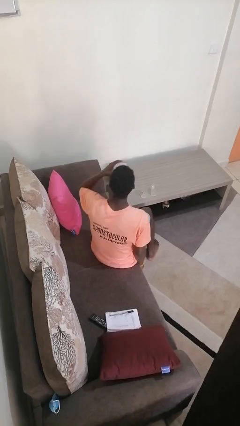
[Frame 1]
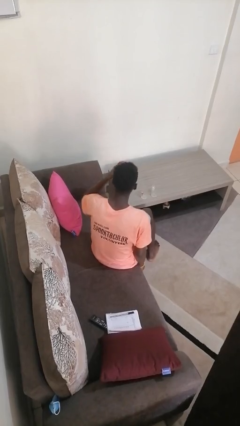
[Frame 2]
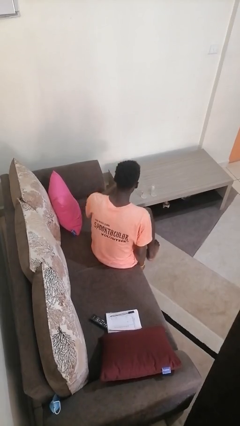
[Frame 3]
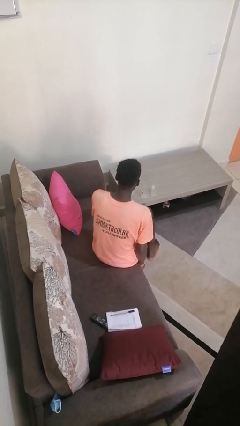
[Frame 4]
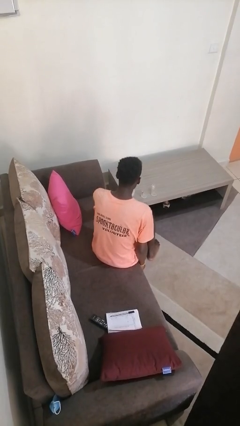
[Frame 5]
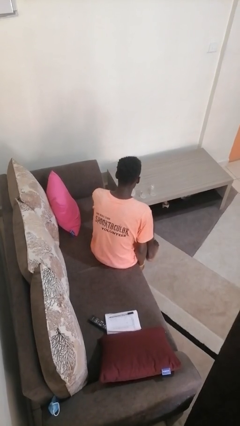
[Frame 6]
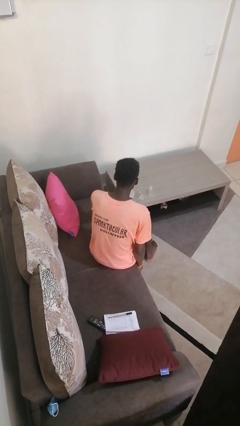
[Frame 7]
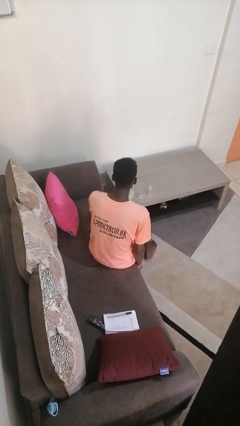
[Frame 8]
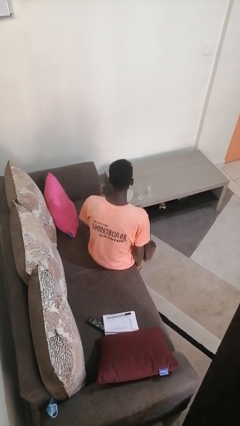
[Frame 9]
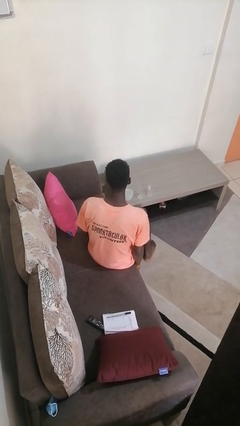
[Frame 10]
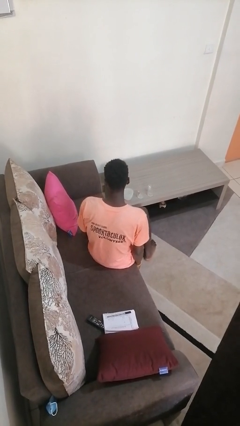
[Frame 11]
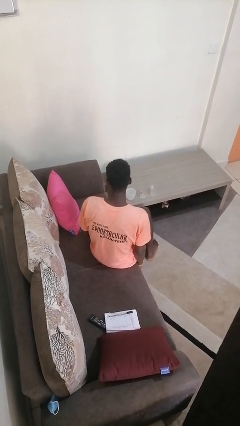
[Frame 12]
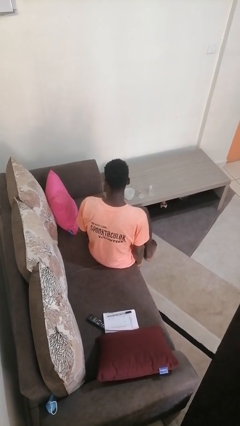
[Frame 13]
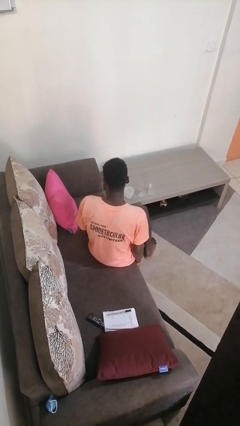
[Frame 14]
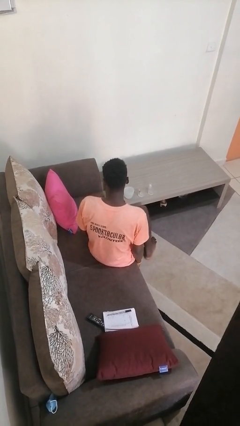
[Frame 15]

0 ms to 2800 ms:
person puts down object on table

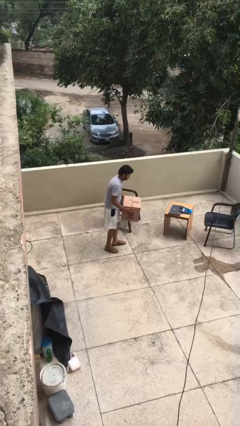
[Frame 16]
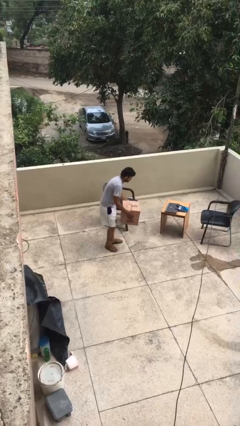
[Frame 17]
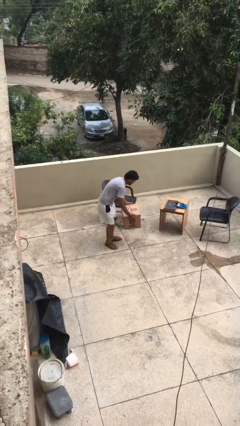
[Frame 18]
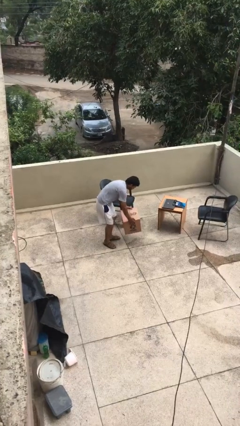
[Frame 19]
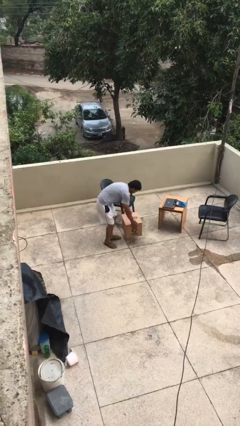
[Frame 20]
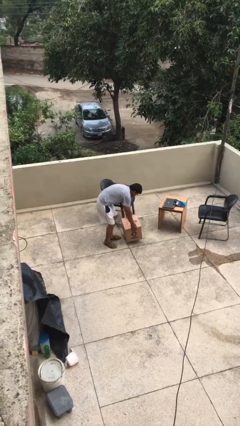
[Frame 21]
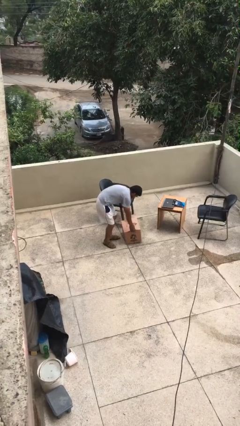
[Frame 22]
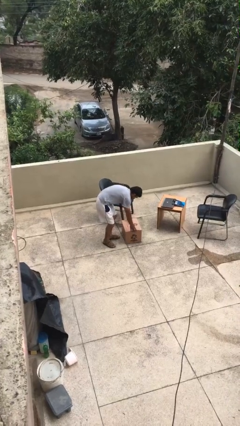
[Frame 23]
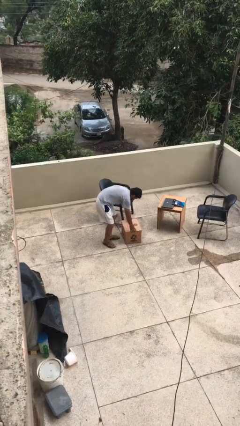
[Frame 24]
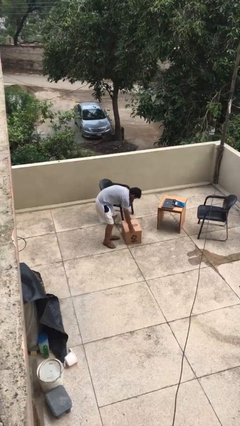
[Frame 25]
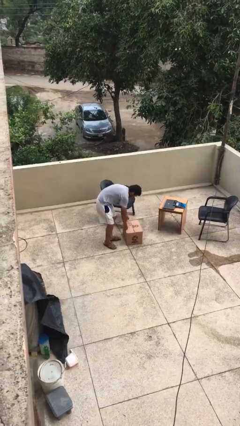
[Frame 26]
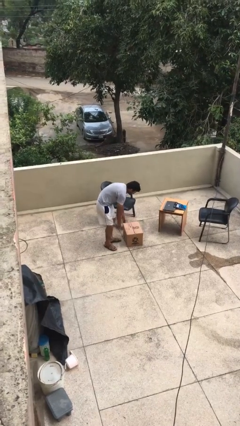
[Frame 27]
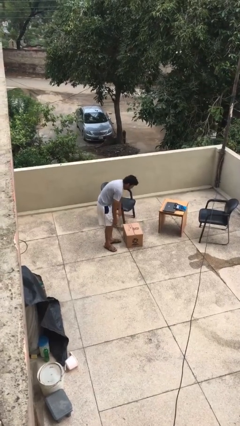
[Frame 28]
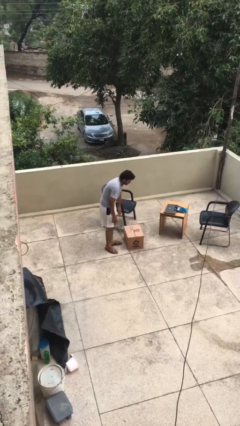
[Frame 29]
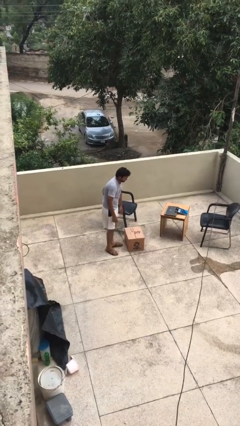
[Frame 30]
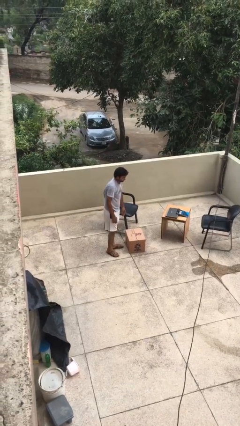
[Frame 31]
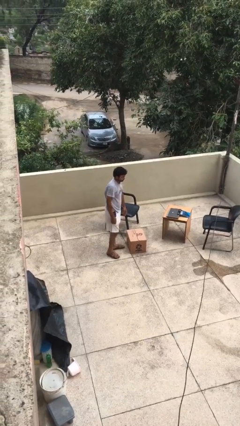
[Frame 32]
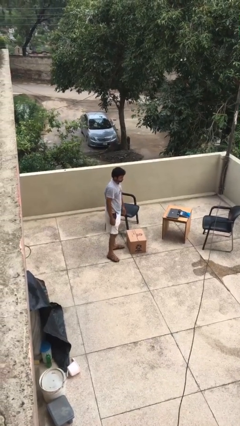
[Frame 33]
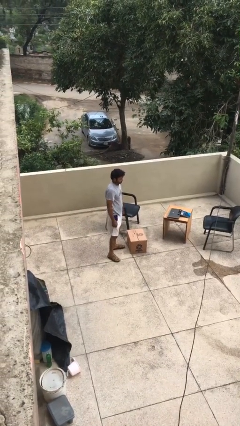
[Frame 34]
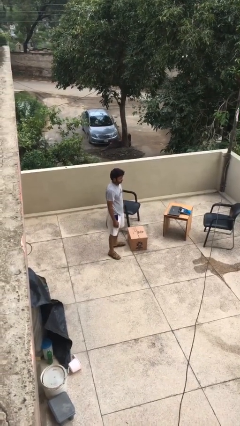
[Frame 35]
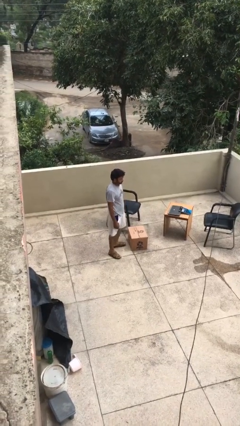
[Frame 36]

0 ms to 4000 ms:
person puts down object on floor

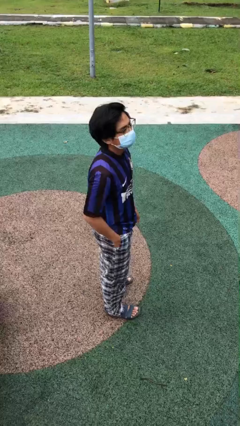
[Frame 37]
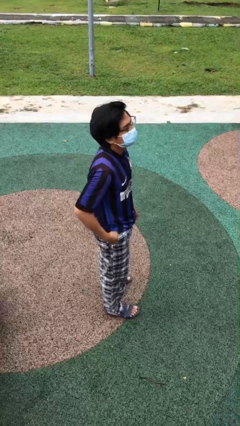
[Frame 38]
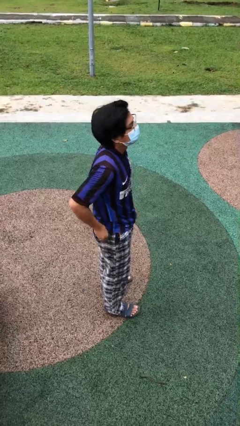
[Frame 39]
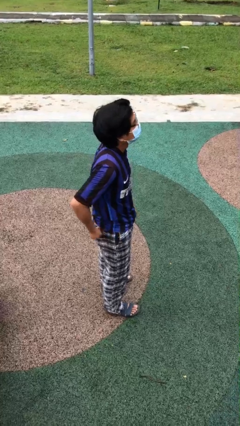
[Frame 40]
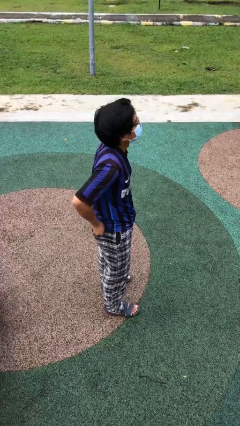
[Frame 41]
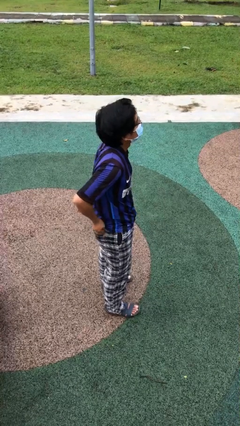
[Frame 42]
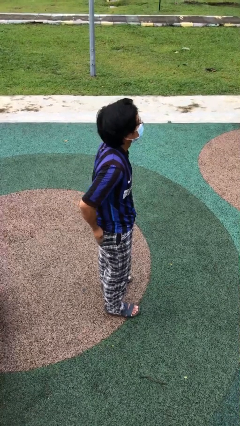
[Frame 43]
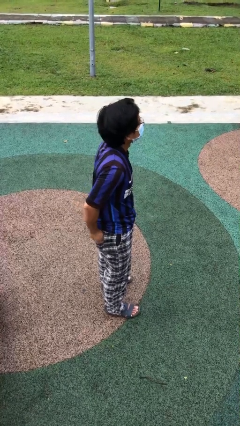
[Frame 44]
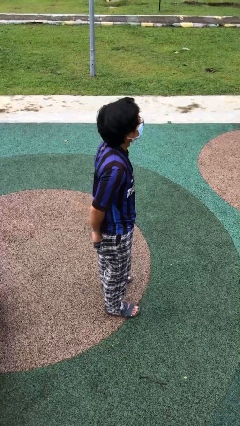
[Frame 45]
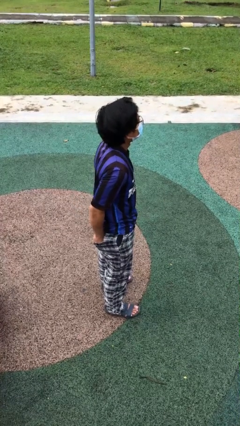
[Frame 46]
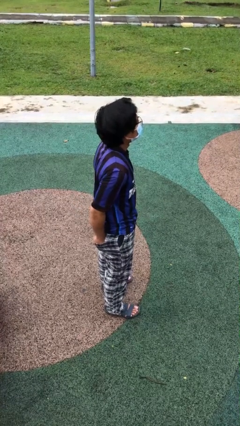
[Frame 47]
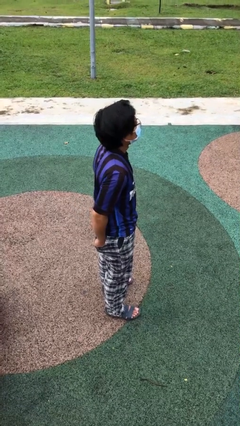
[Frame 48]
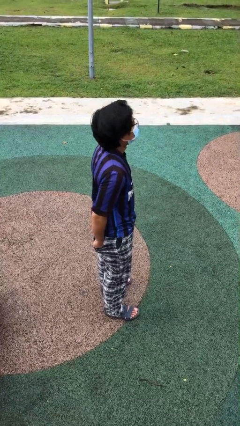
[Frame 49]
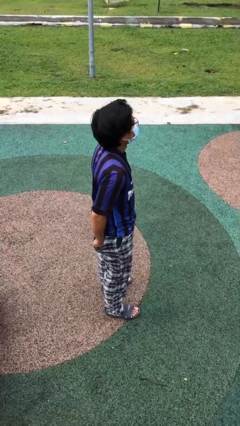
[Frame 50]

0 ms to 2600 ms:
person puts hands in back pockets

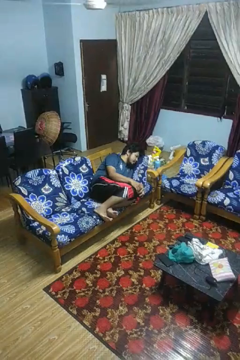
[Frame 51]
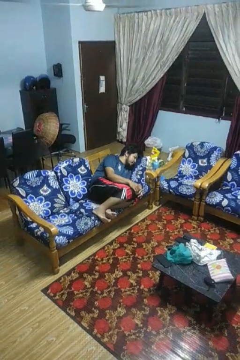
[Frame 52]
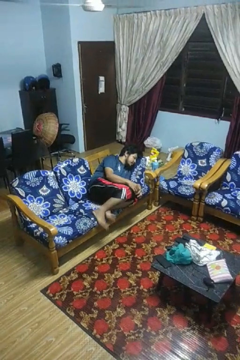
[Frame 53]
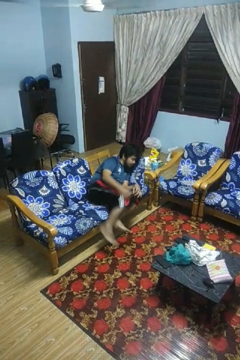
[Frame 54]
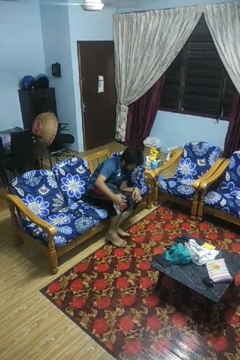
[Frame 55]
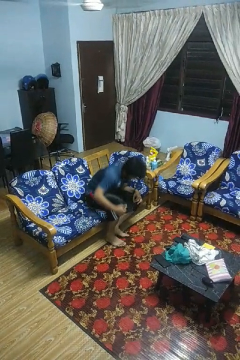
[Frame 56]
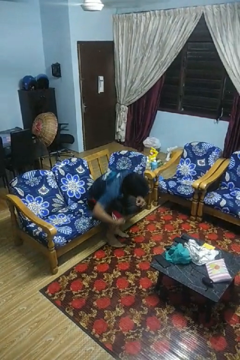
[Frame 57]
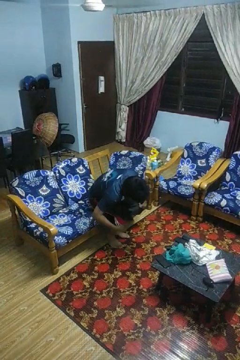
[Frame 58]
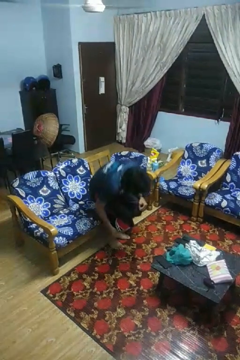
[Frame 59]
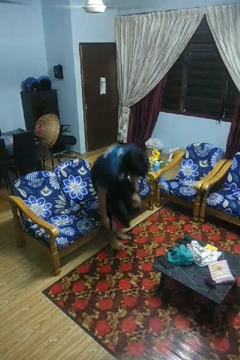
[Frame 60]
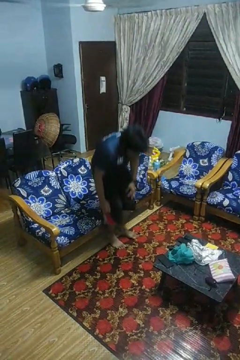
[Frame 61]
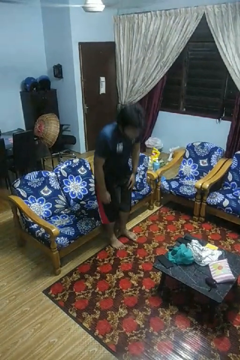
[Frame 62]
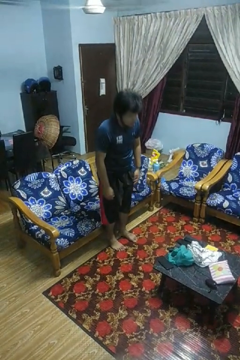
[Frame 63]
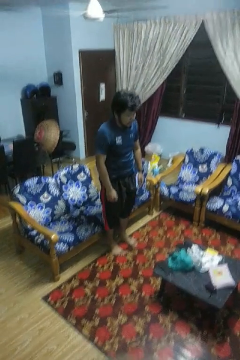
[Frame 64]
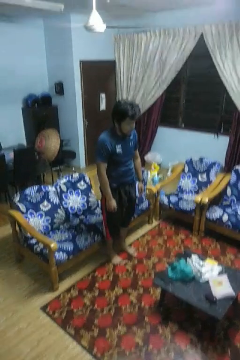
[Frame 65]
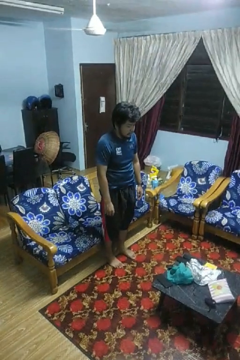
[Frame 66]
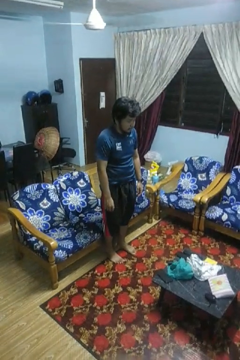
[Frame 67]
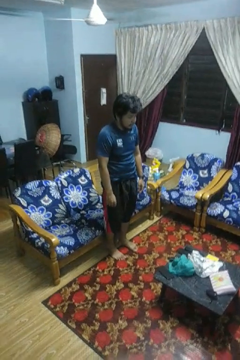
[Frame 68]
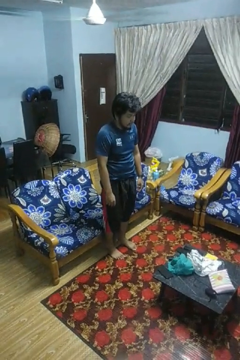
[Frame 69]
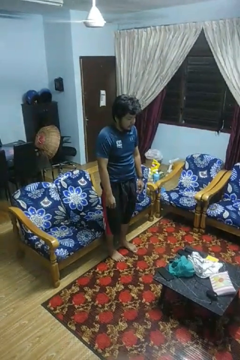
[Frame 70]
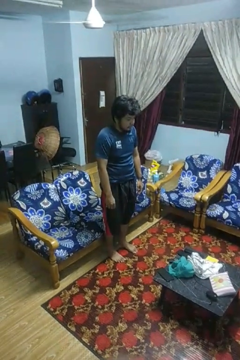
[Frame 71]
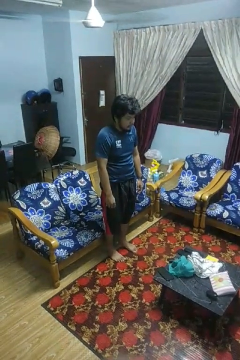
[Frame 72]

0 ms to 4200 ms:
person stands up

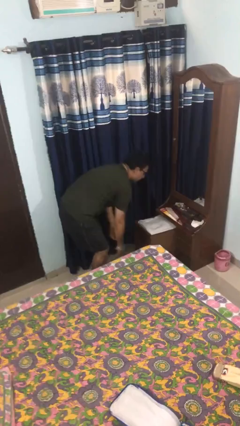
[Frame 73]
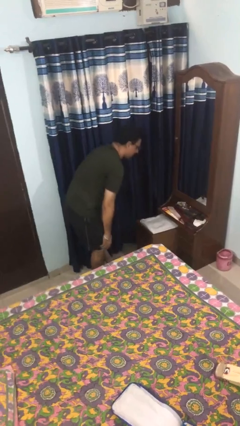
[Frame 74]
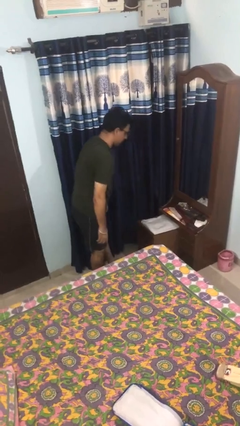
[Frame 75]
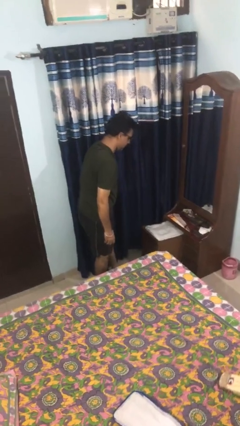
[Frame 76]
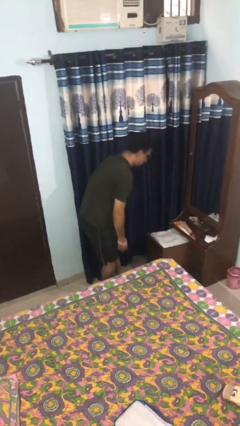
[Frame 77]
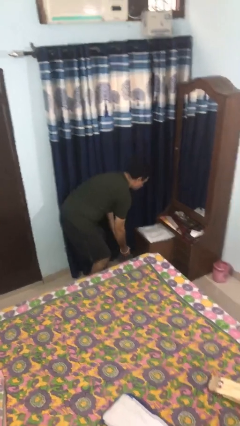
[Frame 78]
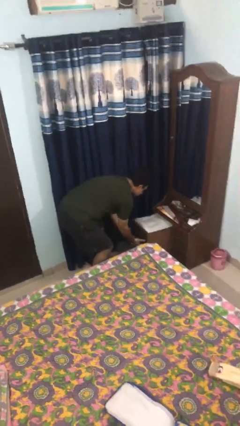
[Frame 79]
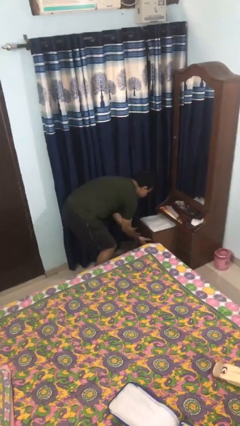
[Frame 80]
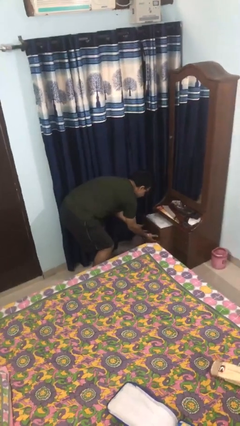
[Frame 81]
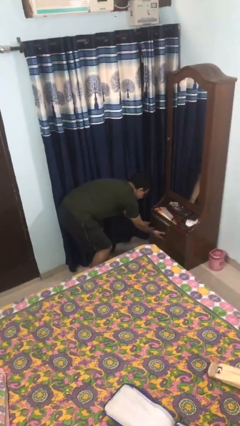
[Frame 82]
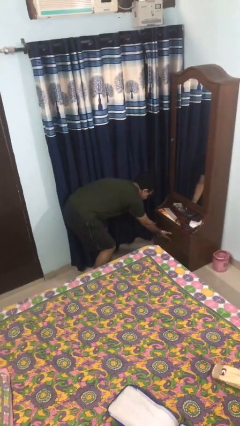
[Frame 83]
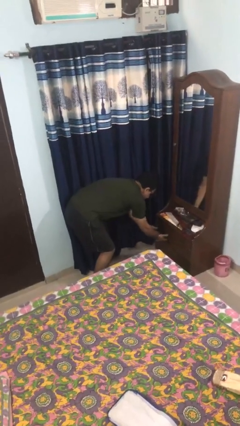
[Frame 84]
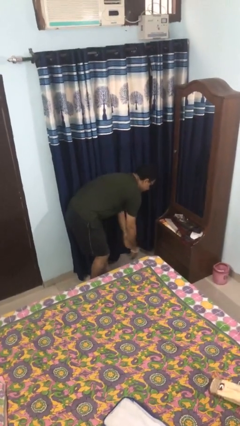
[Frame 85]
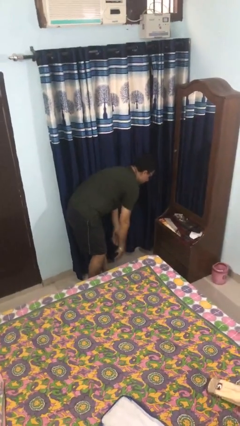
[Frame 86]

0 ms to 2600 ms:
person closes dresser drawer

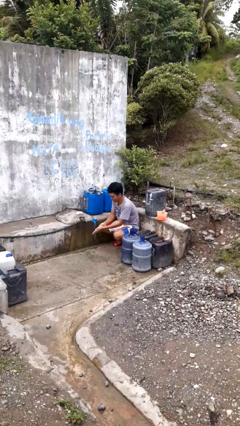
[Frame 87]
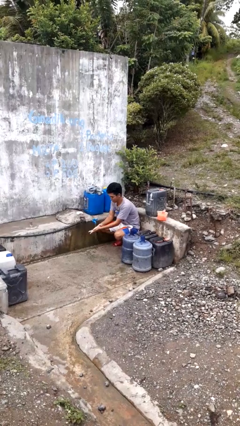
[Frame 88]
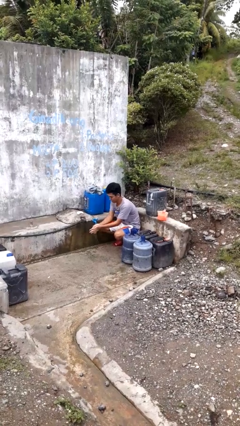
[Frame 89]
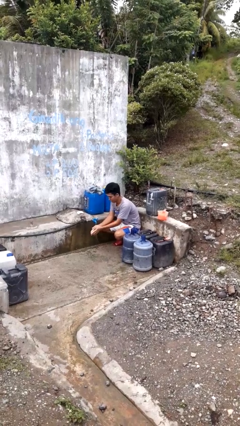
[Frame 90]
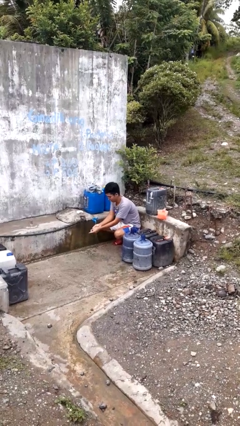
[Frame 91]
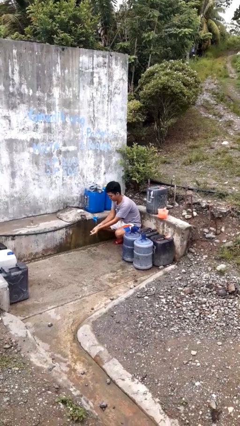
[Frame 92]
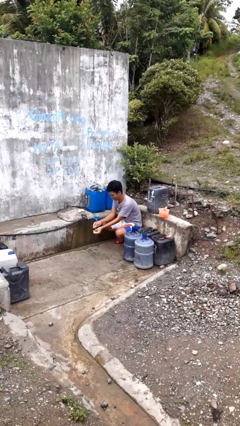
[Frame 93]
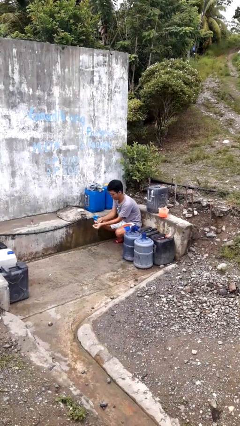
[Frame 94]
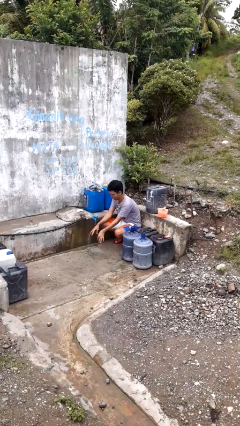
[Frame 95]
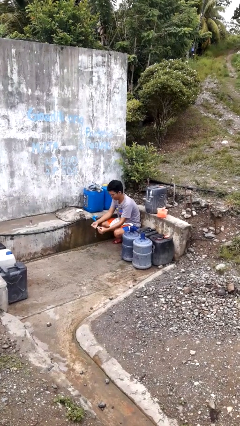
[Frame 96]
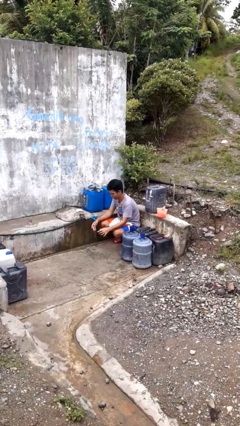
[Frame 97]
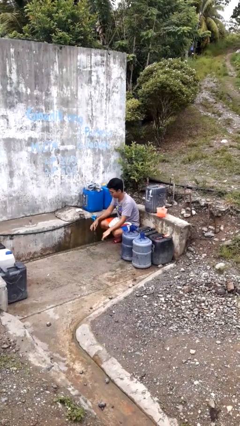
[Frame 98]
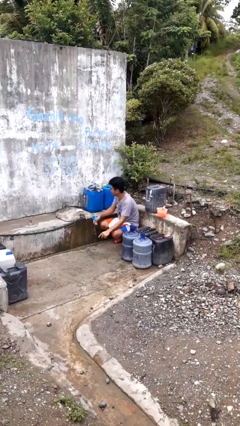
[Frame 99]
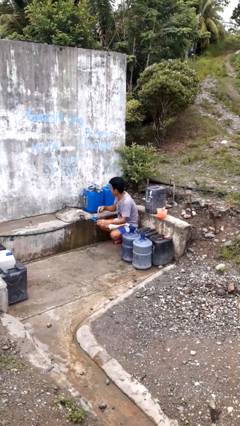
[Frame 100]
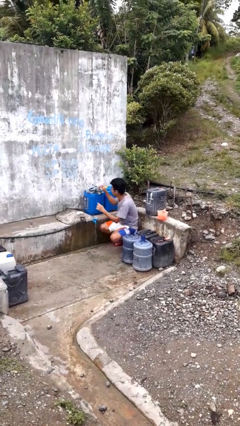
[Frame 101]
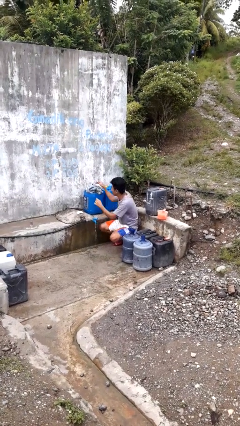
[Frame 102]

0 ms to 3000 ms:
person washes hands
